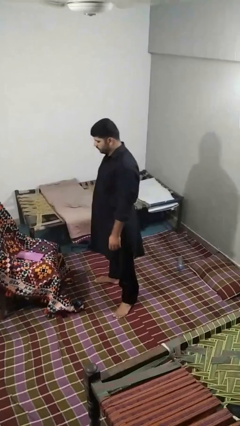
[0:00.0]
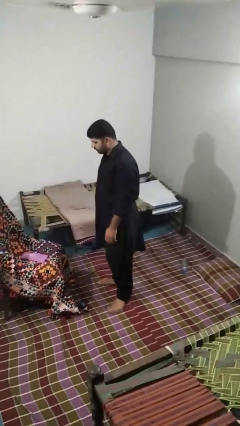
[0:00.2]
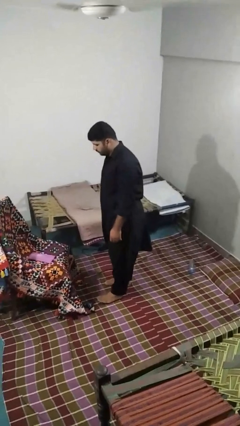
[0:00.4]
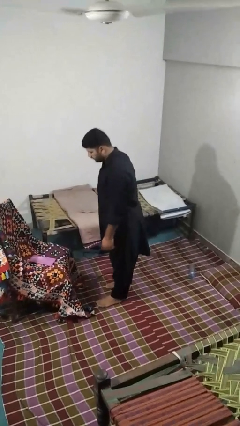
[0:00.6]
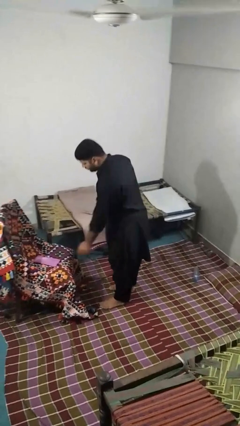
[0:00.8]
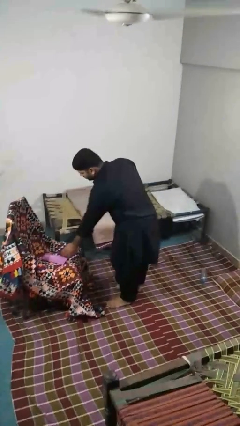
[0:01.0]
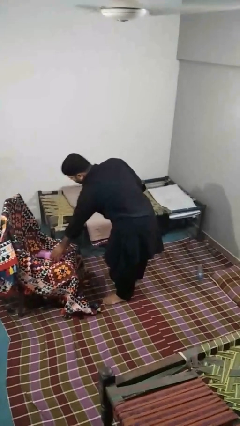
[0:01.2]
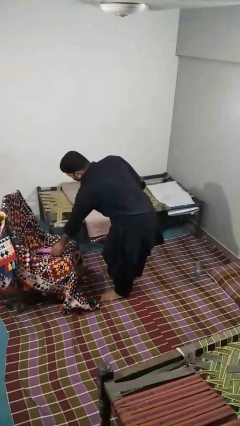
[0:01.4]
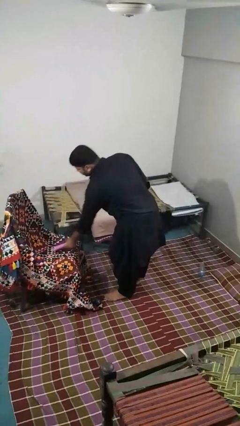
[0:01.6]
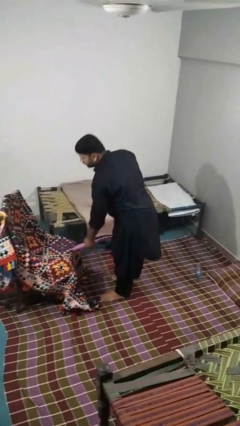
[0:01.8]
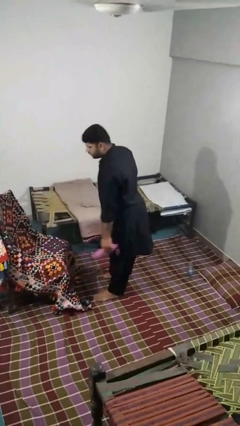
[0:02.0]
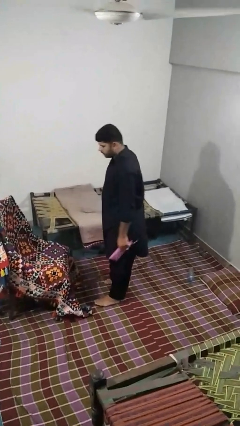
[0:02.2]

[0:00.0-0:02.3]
person picks up object from couch

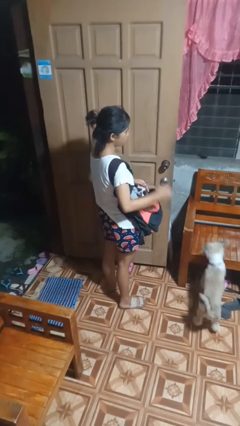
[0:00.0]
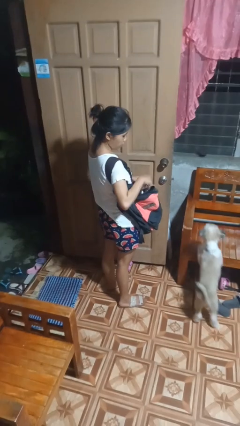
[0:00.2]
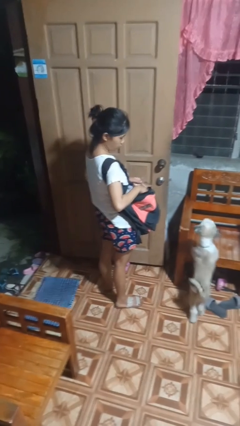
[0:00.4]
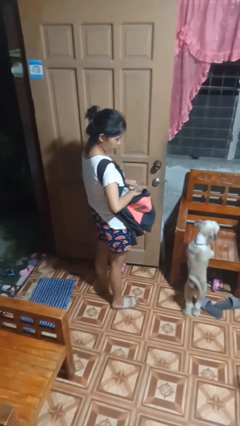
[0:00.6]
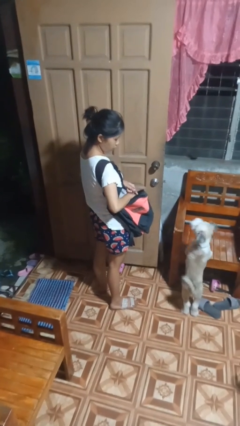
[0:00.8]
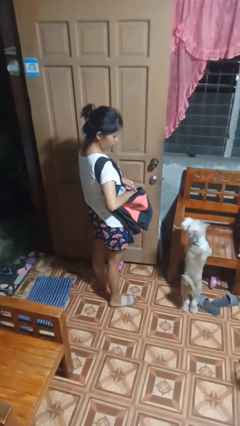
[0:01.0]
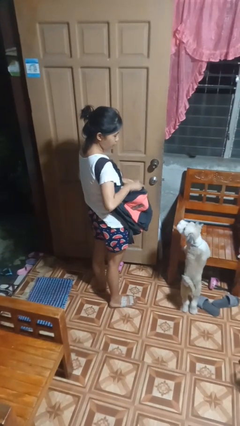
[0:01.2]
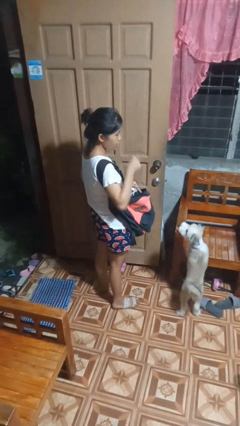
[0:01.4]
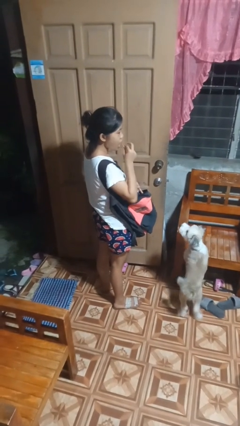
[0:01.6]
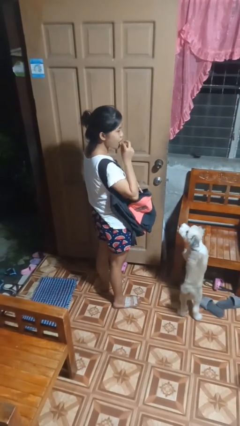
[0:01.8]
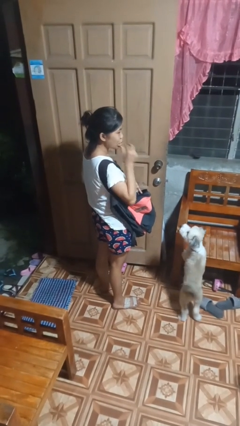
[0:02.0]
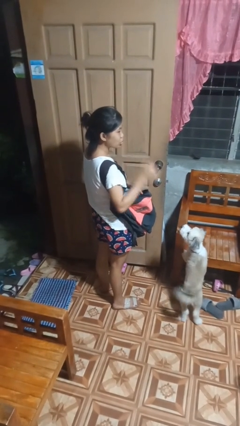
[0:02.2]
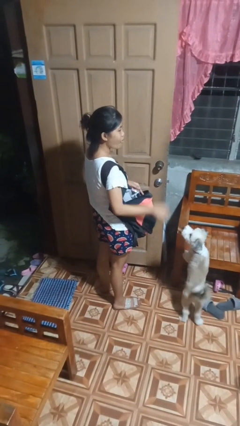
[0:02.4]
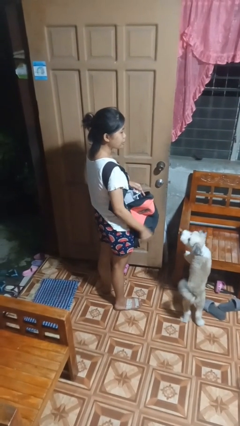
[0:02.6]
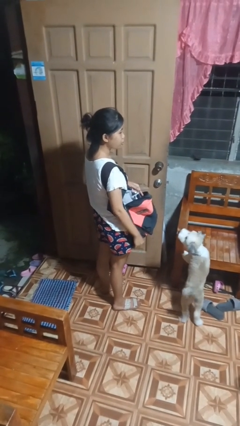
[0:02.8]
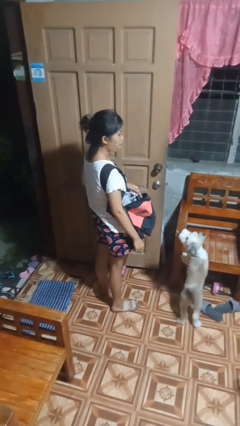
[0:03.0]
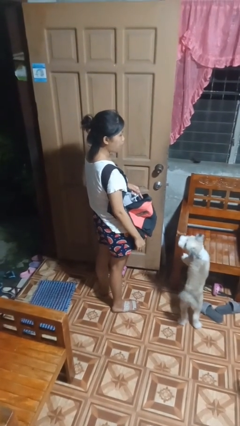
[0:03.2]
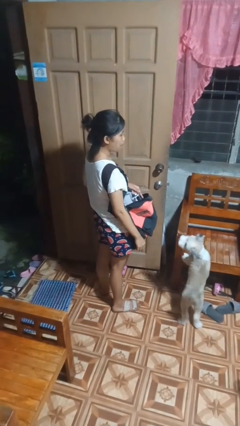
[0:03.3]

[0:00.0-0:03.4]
person eats snack from bag

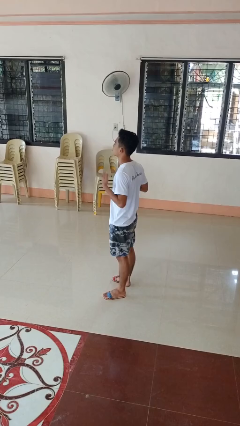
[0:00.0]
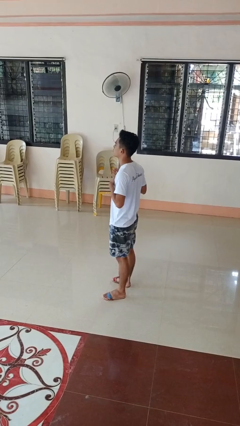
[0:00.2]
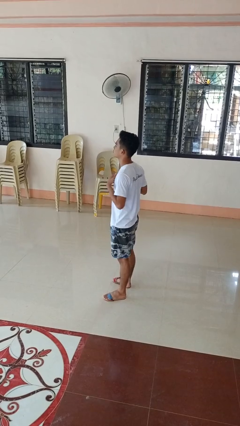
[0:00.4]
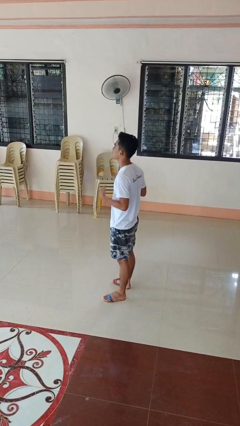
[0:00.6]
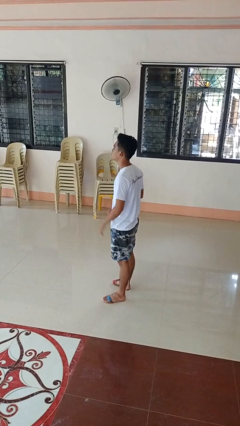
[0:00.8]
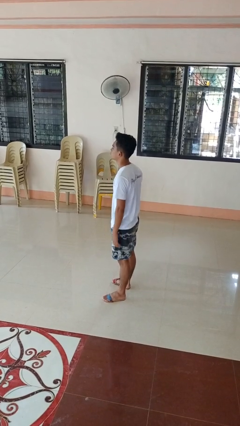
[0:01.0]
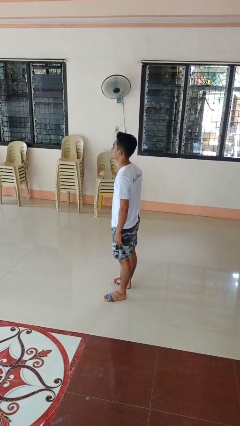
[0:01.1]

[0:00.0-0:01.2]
person drums on chest

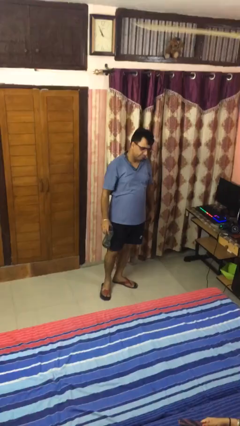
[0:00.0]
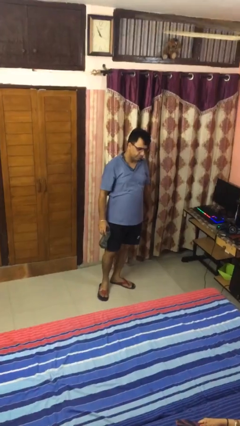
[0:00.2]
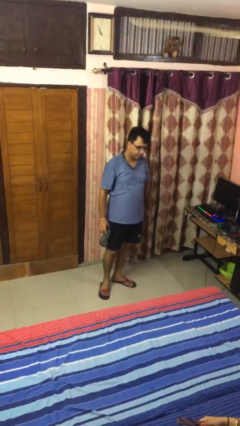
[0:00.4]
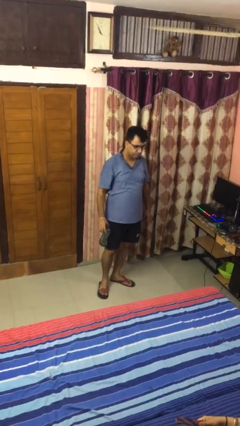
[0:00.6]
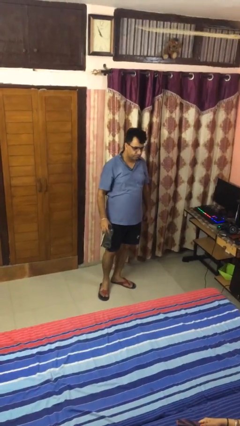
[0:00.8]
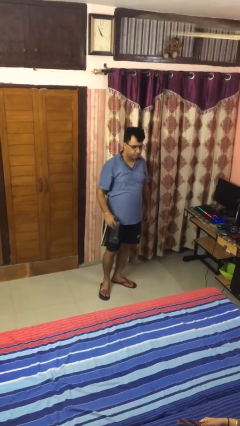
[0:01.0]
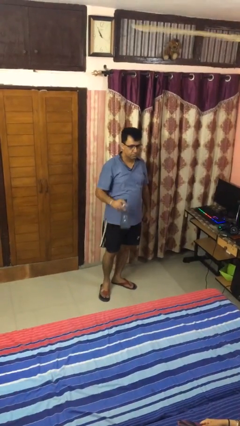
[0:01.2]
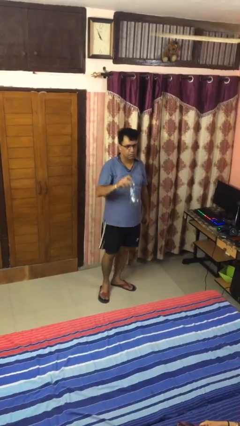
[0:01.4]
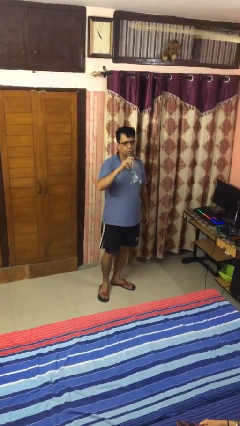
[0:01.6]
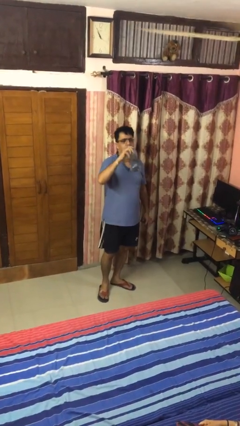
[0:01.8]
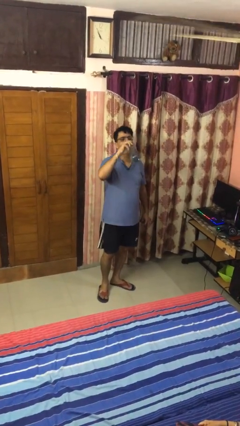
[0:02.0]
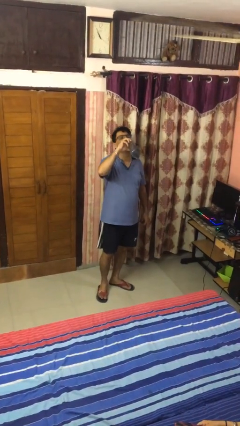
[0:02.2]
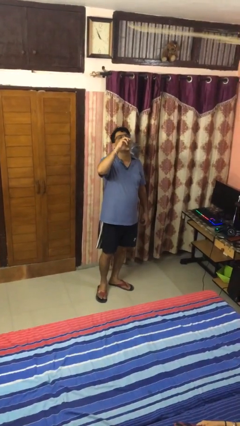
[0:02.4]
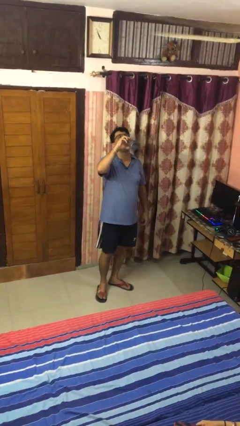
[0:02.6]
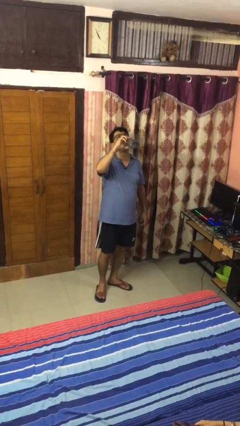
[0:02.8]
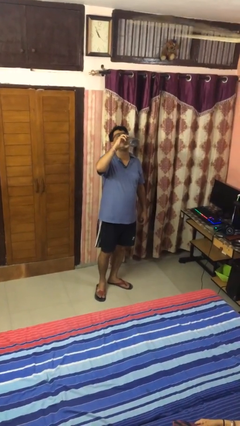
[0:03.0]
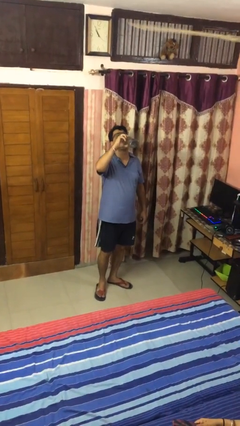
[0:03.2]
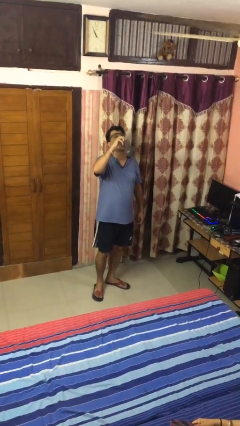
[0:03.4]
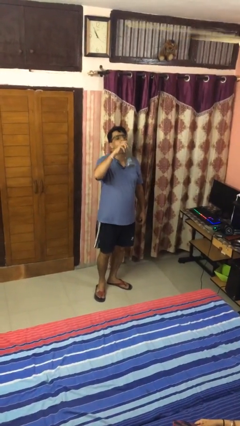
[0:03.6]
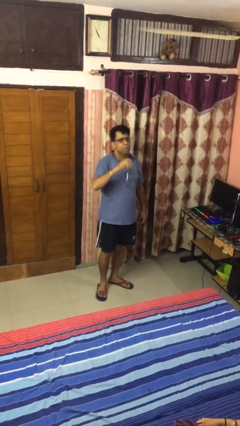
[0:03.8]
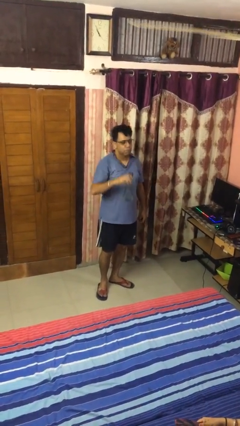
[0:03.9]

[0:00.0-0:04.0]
person drinks from bottle

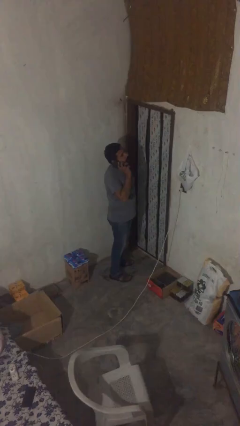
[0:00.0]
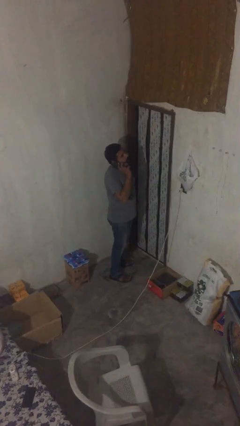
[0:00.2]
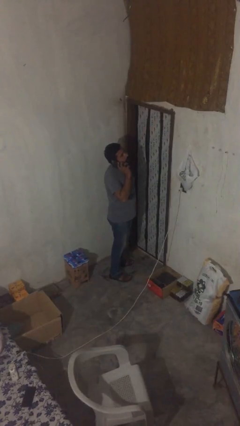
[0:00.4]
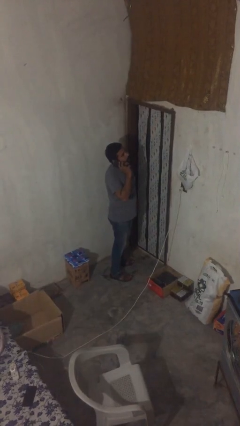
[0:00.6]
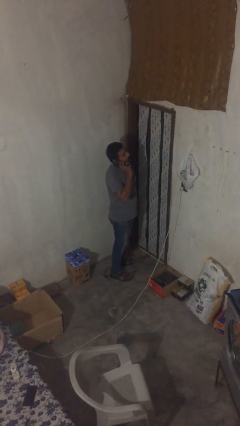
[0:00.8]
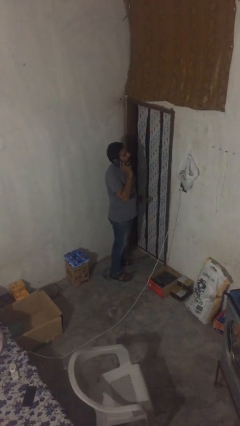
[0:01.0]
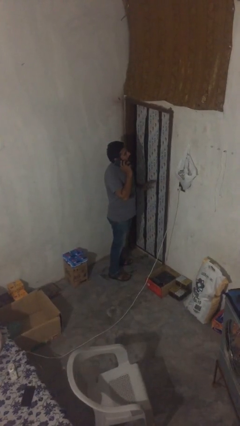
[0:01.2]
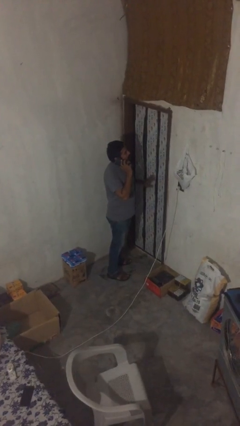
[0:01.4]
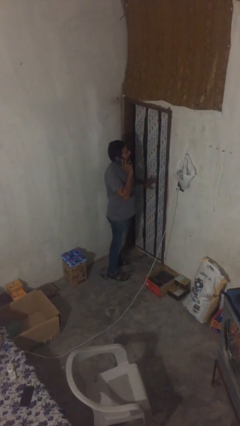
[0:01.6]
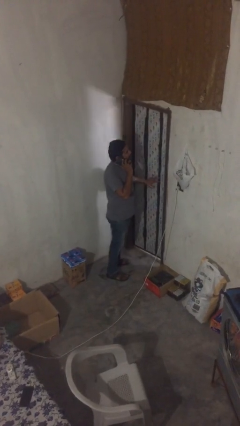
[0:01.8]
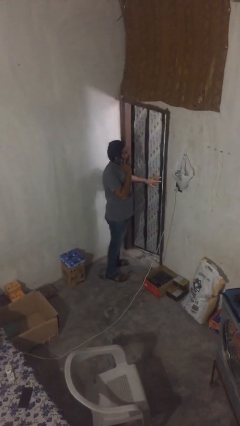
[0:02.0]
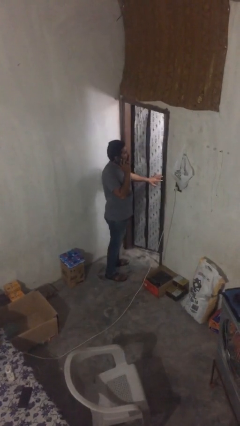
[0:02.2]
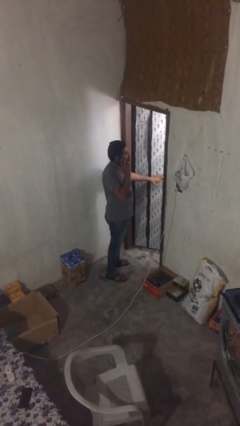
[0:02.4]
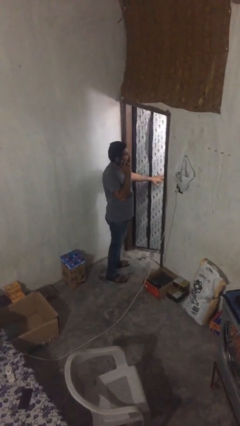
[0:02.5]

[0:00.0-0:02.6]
person opens facility door

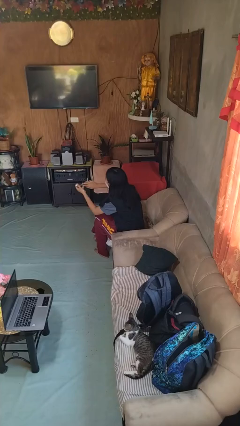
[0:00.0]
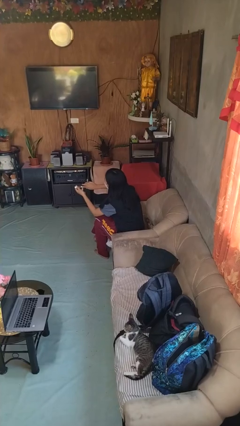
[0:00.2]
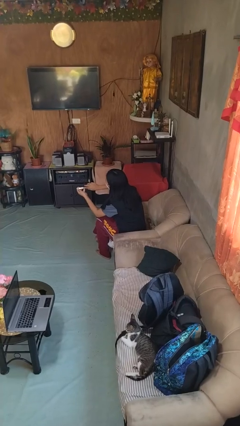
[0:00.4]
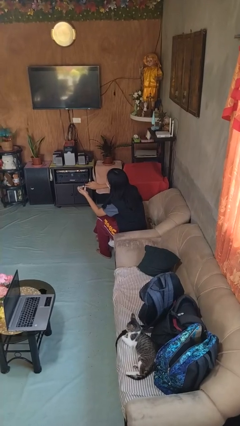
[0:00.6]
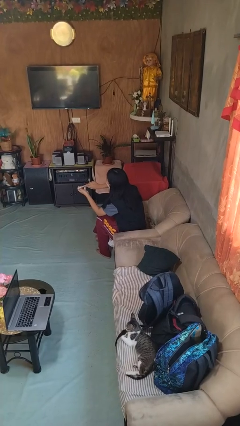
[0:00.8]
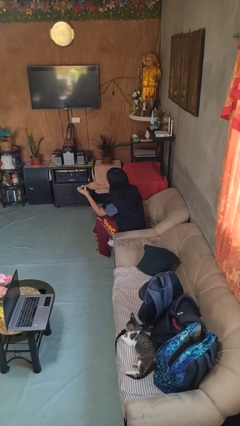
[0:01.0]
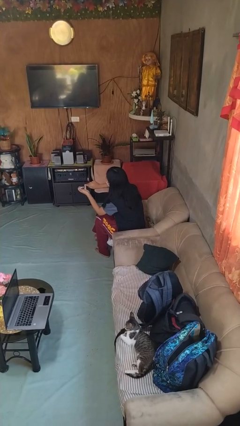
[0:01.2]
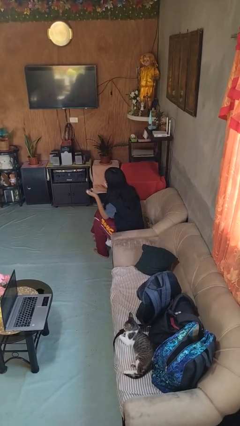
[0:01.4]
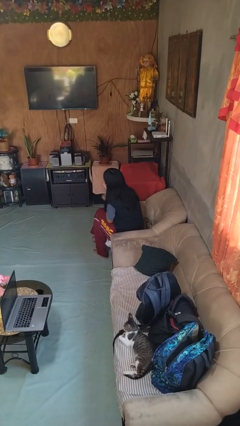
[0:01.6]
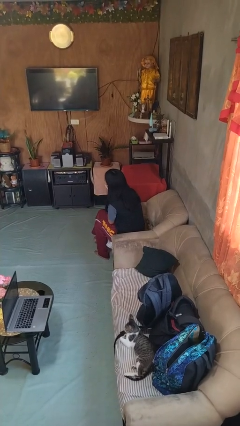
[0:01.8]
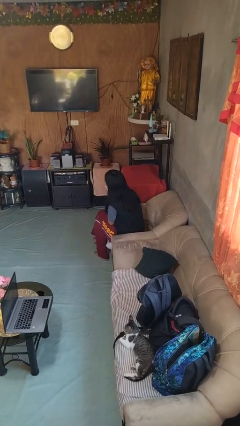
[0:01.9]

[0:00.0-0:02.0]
person clips fingernails

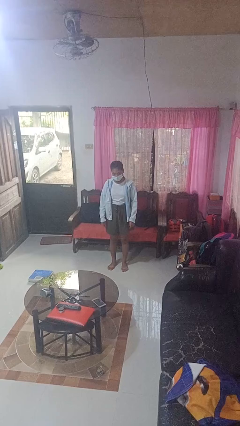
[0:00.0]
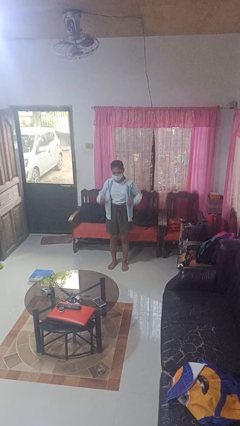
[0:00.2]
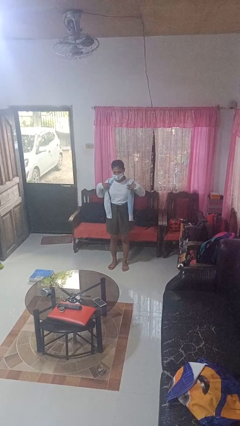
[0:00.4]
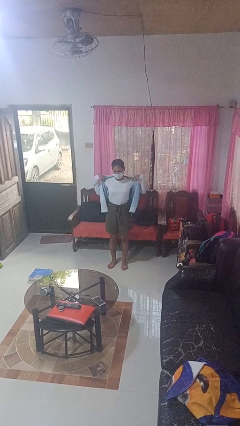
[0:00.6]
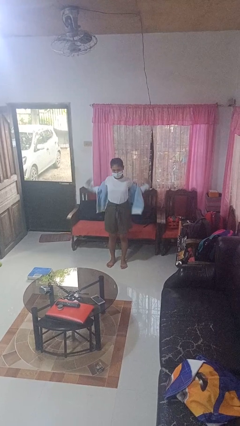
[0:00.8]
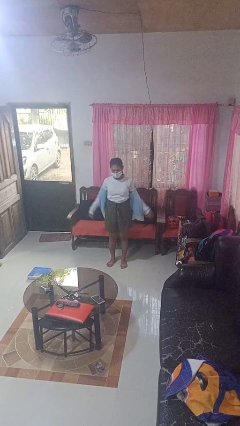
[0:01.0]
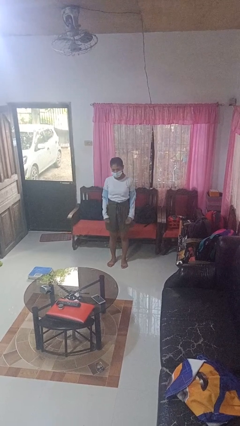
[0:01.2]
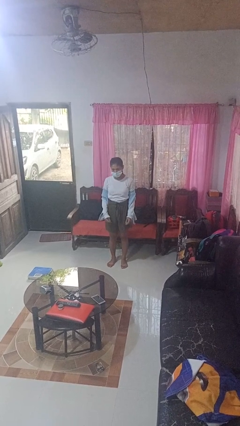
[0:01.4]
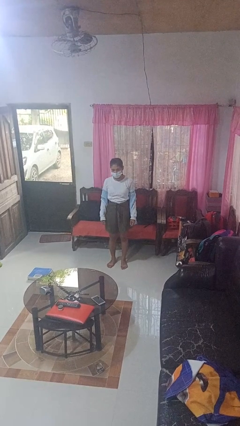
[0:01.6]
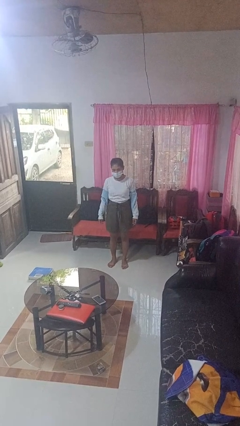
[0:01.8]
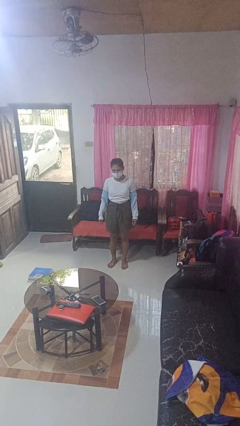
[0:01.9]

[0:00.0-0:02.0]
person takes off jacket
